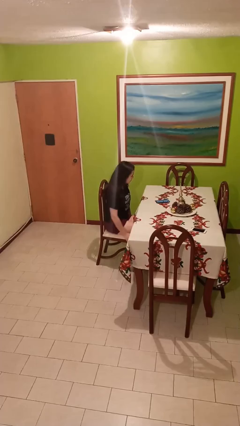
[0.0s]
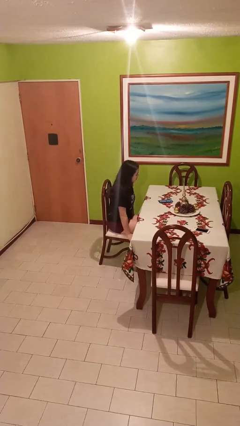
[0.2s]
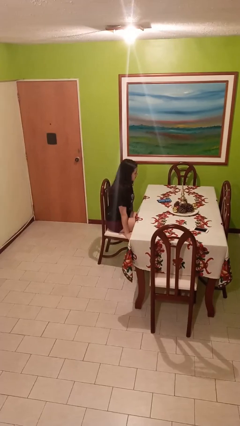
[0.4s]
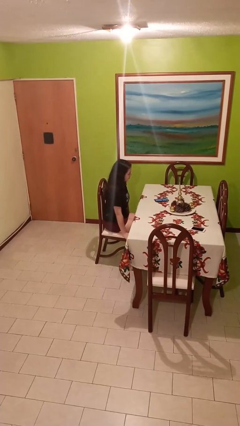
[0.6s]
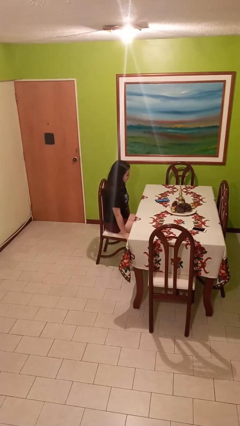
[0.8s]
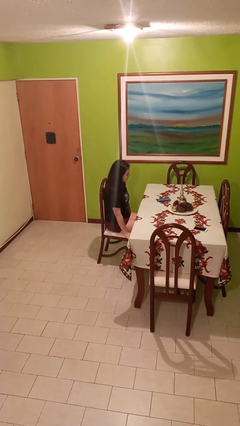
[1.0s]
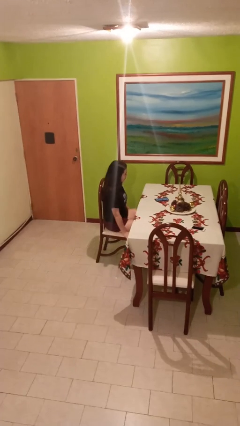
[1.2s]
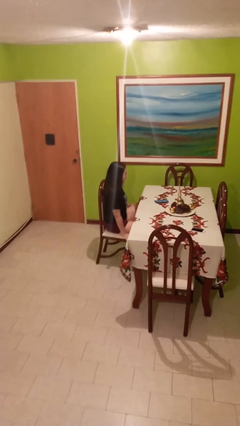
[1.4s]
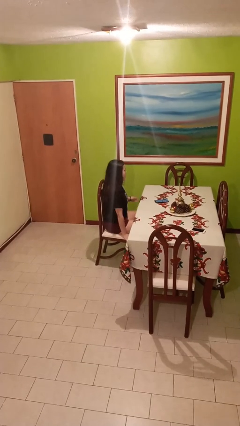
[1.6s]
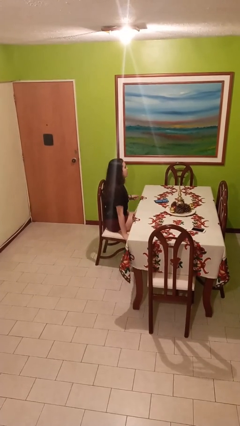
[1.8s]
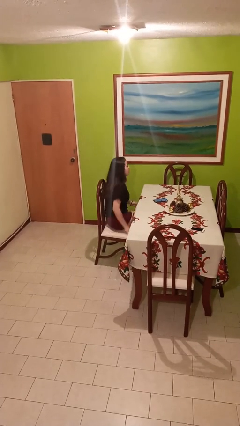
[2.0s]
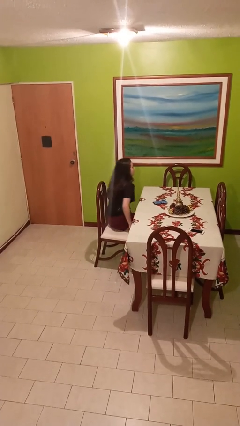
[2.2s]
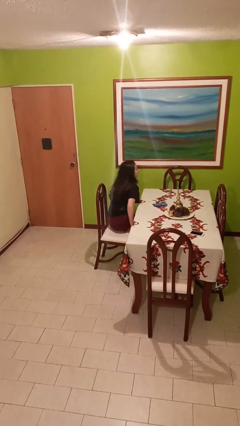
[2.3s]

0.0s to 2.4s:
person sits down

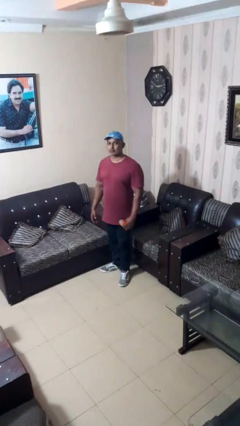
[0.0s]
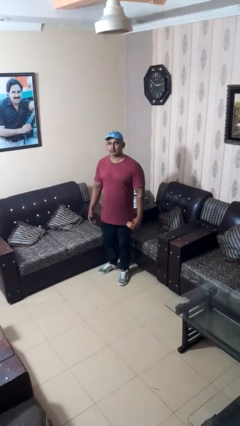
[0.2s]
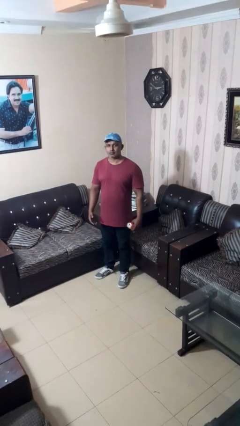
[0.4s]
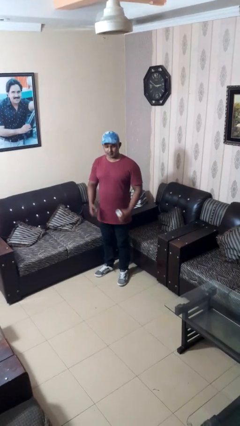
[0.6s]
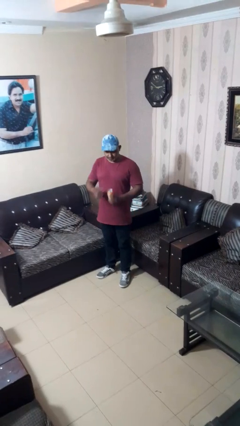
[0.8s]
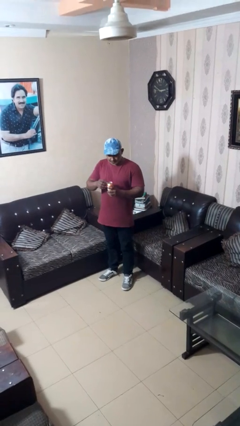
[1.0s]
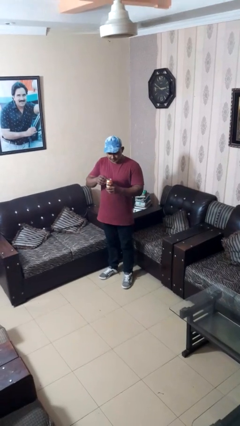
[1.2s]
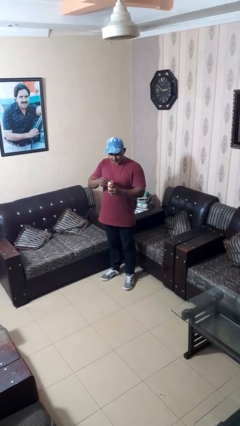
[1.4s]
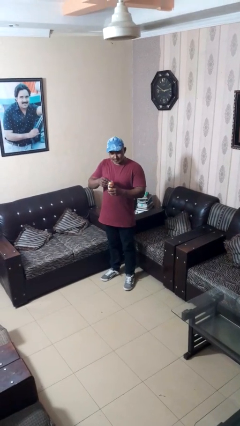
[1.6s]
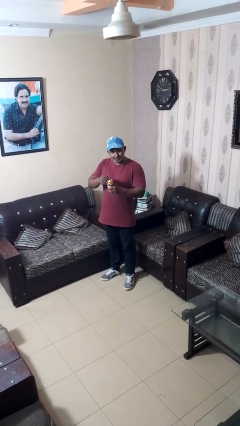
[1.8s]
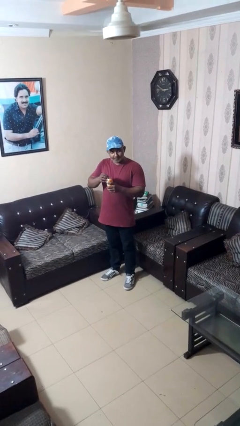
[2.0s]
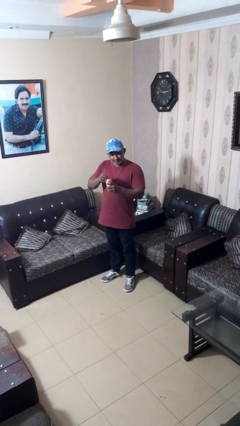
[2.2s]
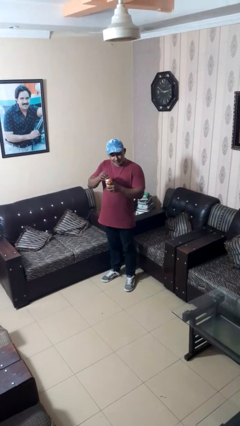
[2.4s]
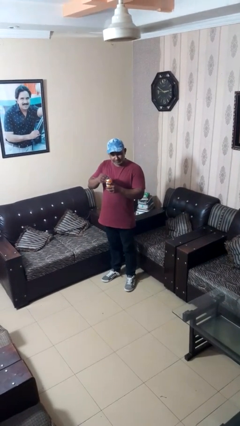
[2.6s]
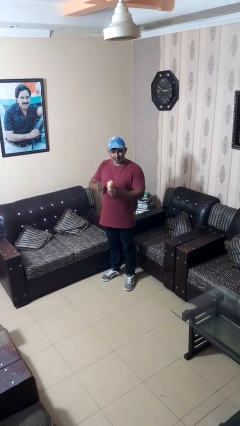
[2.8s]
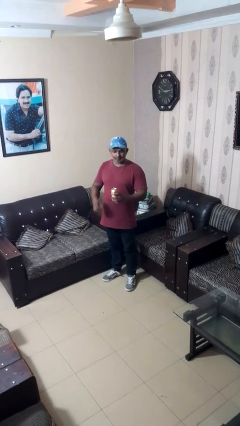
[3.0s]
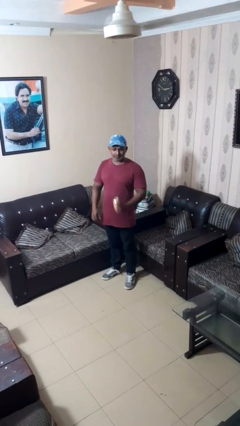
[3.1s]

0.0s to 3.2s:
person opens beverage can

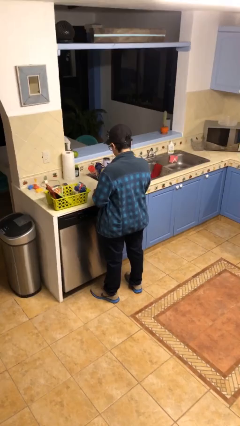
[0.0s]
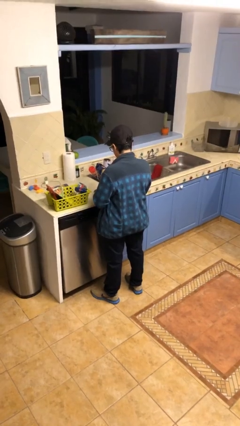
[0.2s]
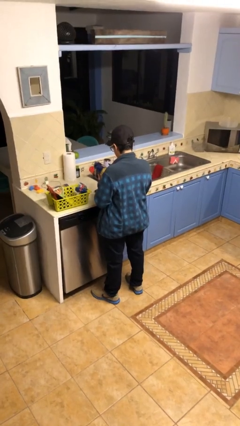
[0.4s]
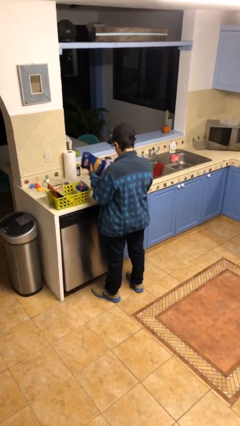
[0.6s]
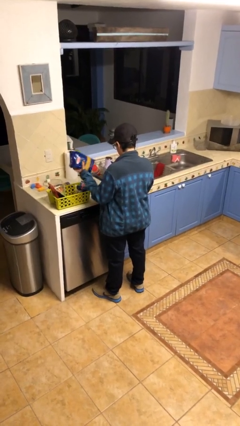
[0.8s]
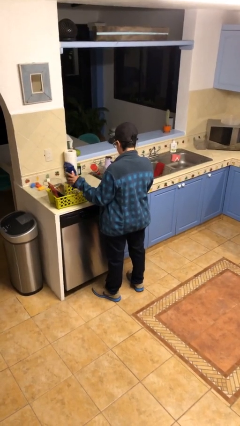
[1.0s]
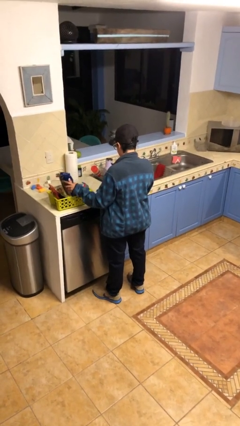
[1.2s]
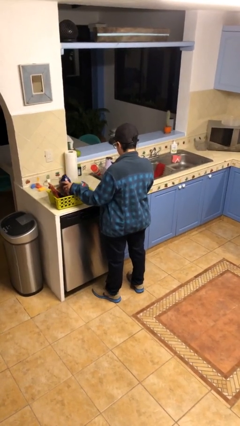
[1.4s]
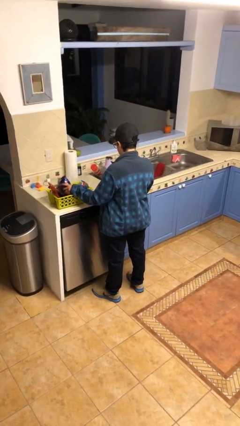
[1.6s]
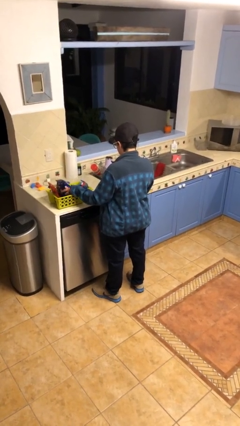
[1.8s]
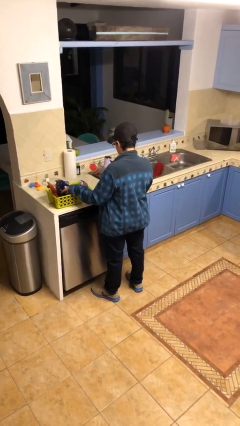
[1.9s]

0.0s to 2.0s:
person puts object into basket

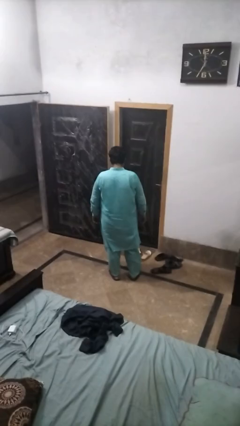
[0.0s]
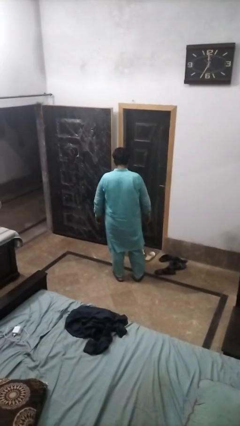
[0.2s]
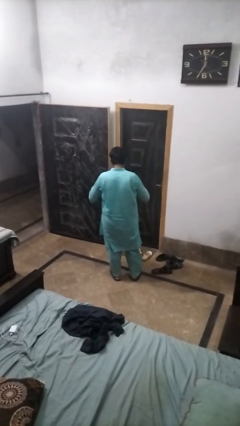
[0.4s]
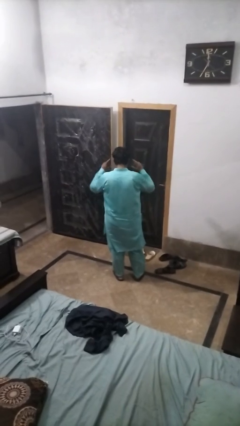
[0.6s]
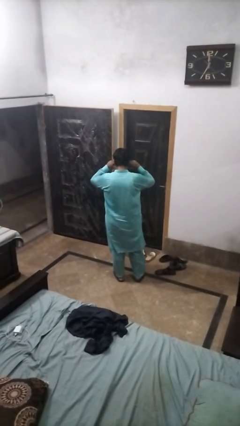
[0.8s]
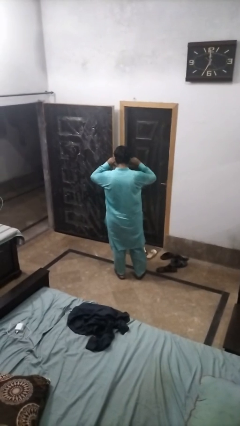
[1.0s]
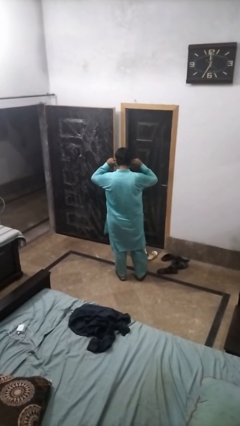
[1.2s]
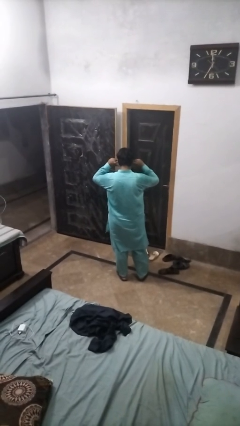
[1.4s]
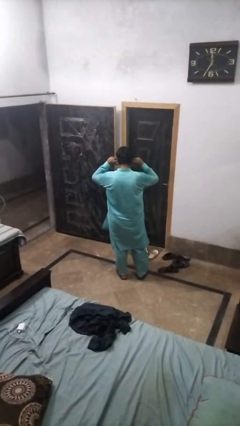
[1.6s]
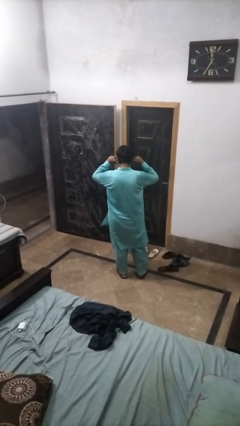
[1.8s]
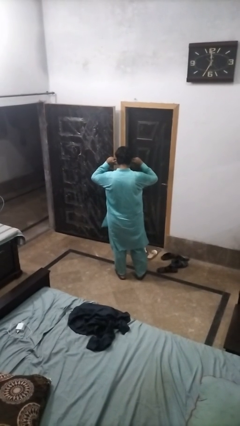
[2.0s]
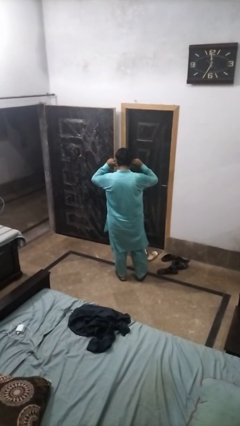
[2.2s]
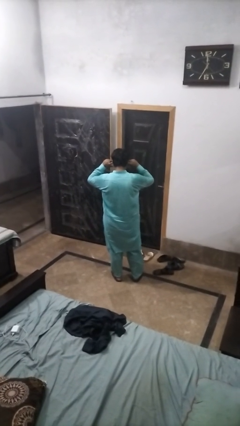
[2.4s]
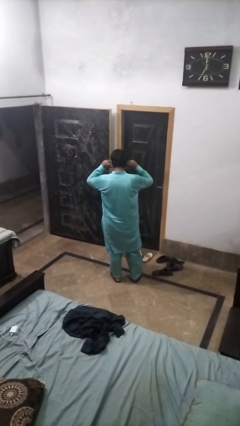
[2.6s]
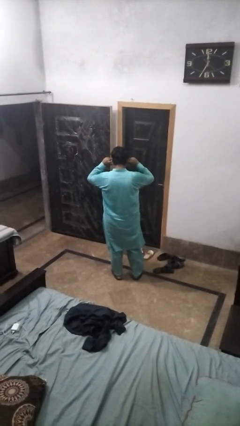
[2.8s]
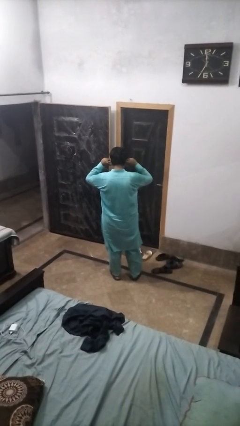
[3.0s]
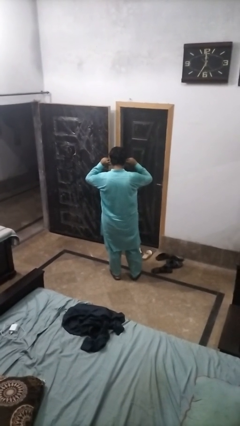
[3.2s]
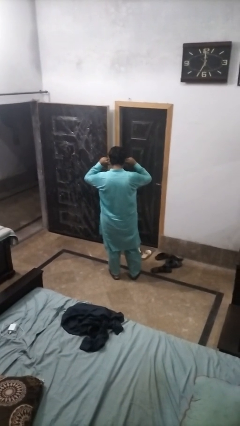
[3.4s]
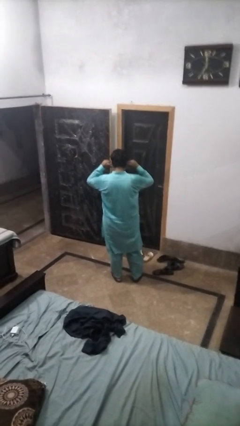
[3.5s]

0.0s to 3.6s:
person puts fingers in ear

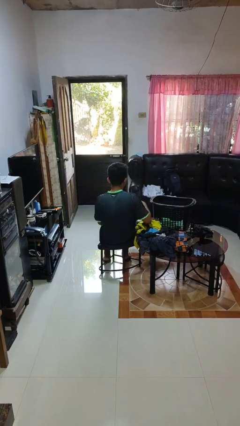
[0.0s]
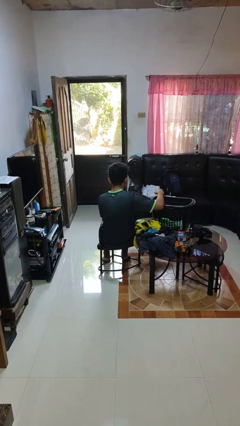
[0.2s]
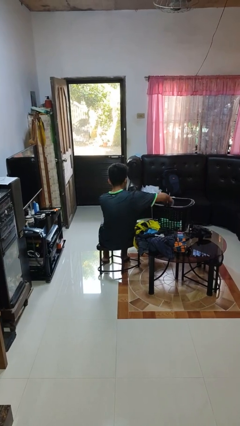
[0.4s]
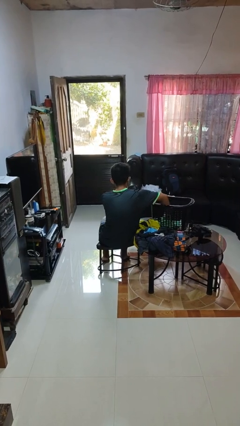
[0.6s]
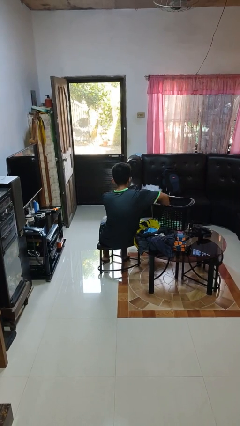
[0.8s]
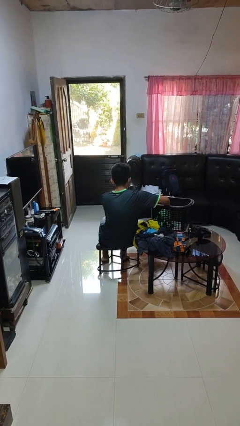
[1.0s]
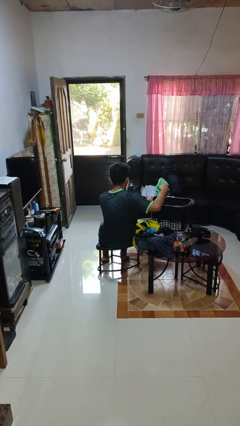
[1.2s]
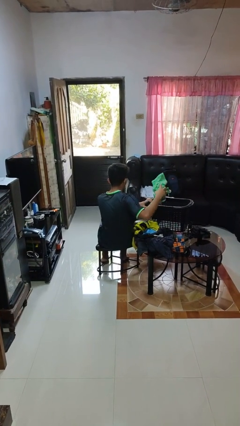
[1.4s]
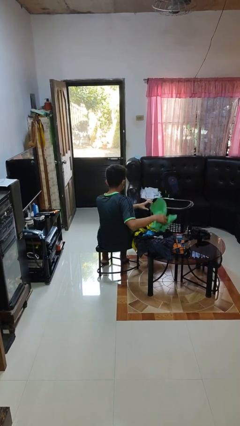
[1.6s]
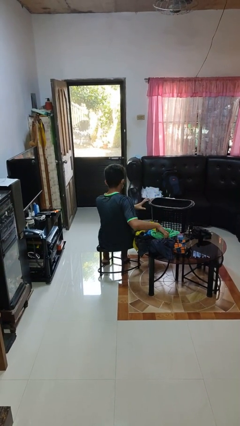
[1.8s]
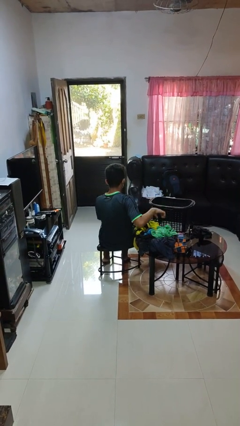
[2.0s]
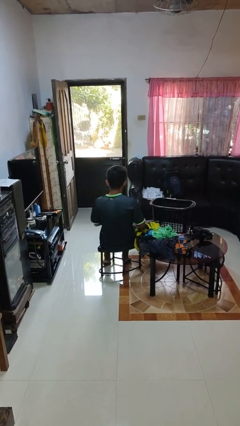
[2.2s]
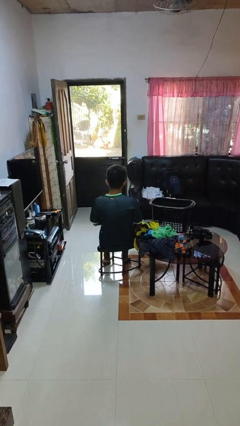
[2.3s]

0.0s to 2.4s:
person takes object from basket

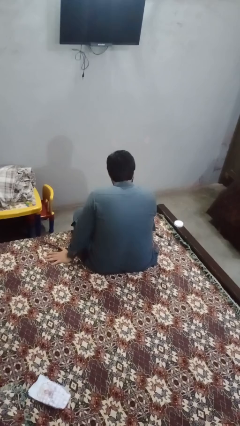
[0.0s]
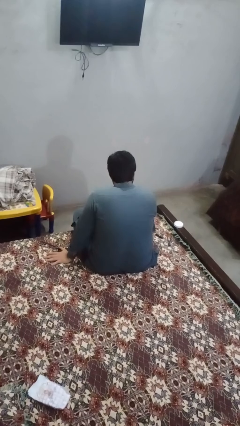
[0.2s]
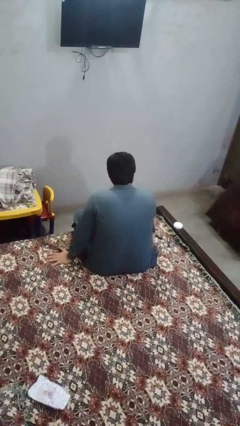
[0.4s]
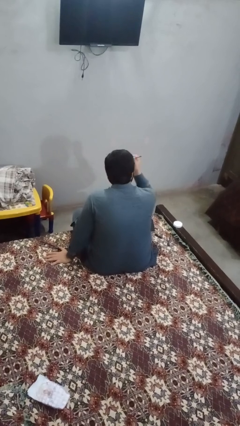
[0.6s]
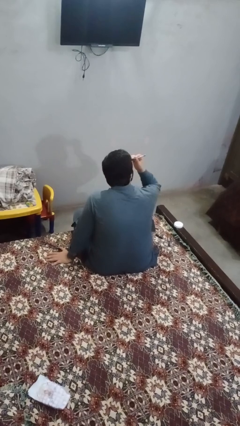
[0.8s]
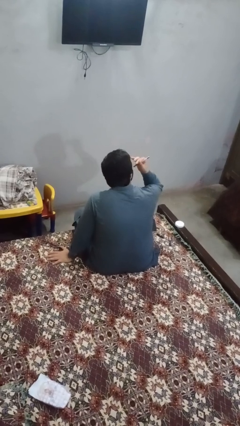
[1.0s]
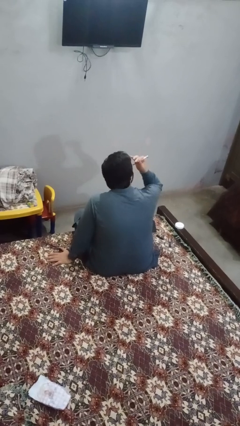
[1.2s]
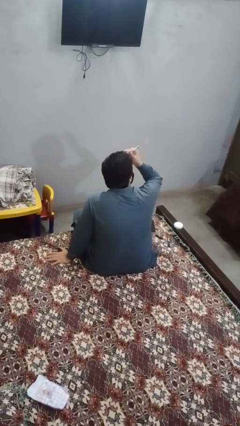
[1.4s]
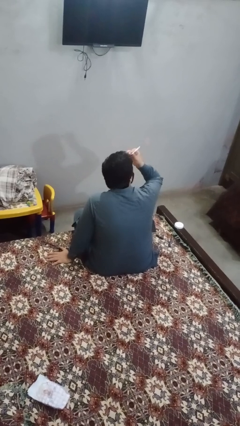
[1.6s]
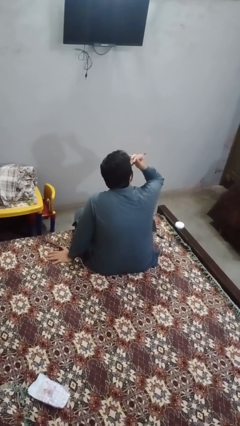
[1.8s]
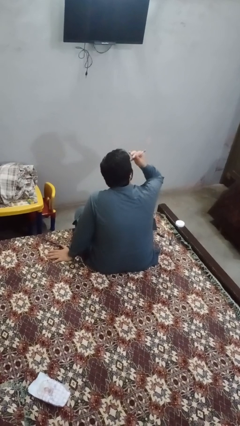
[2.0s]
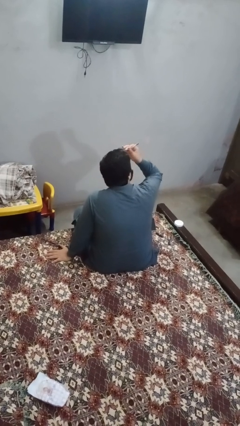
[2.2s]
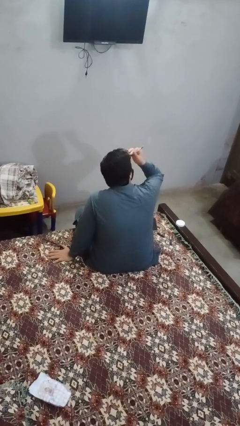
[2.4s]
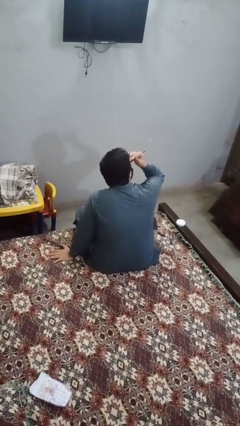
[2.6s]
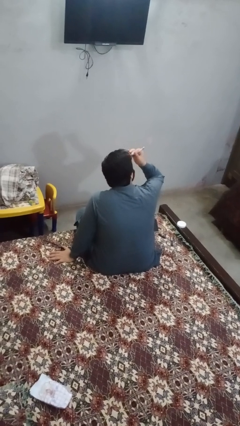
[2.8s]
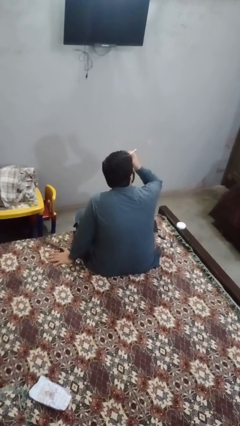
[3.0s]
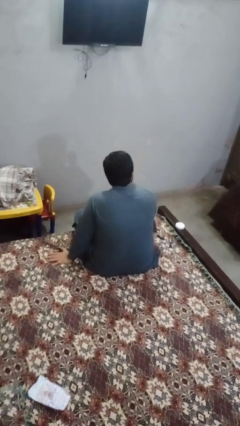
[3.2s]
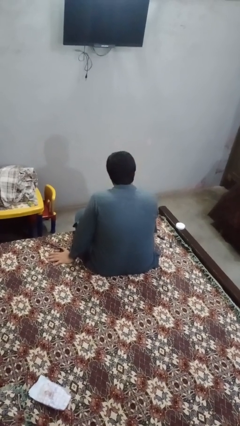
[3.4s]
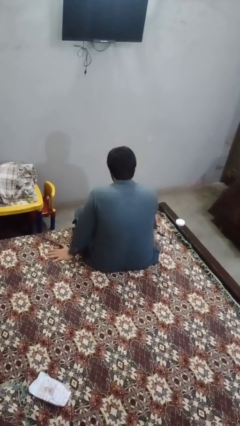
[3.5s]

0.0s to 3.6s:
person applies eye makeup
